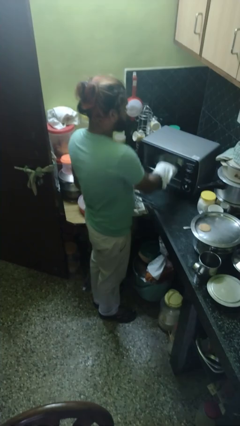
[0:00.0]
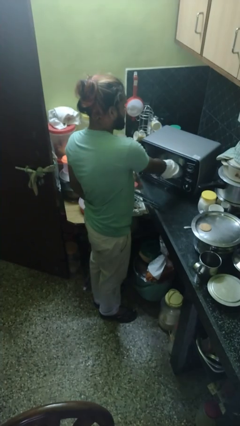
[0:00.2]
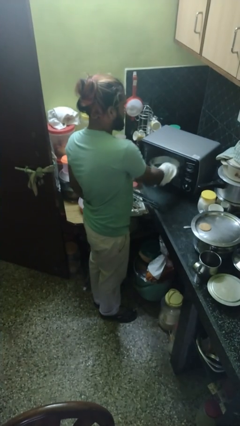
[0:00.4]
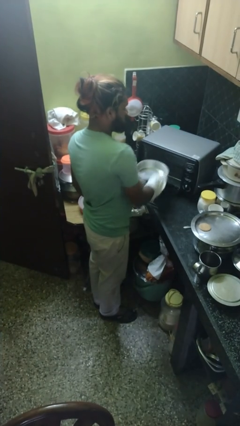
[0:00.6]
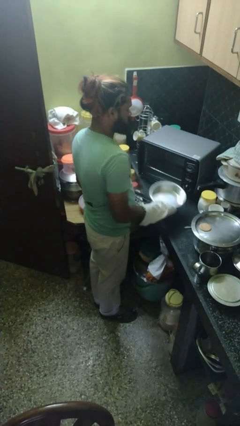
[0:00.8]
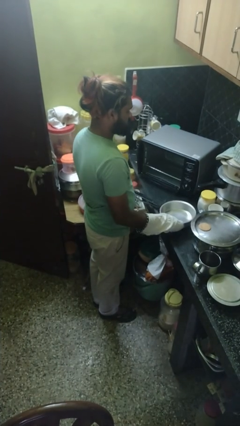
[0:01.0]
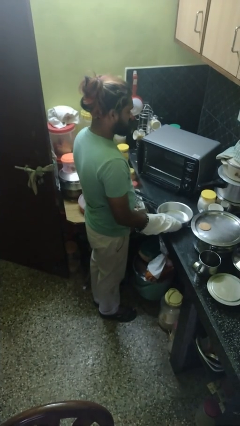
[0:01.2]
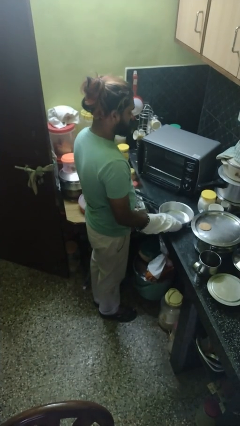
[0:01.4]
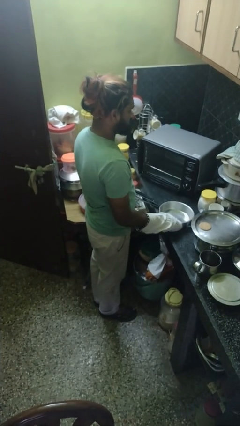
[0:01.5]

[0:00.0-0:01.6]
person takes object from oven

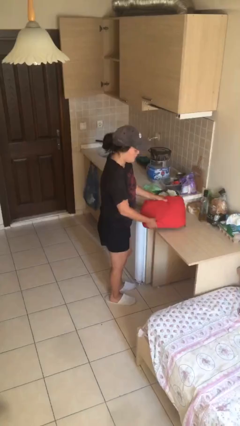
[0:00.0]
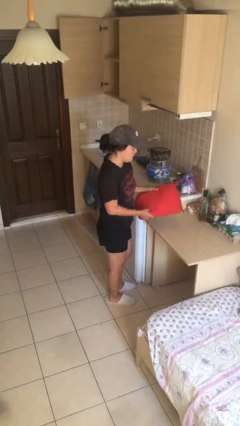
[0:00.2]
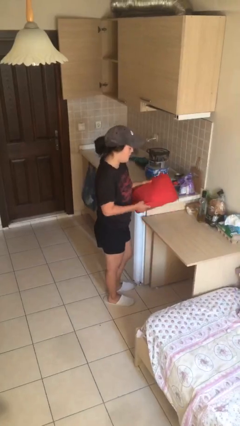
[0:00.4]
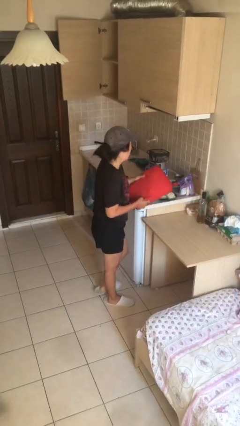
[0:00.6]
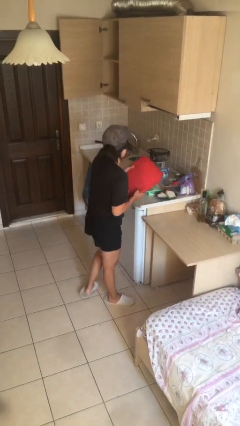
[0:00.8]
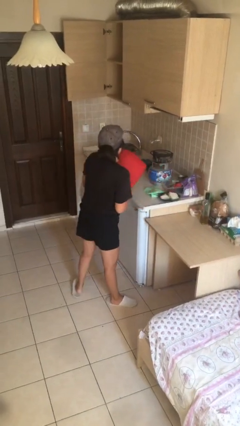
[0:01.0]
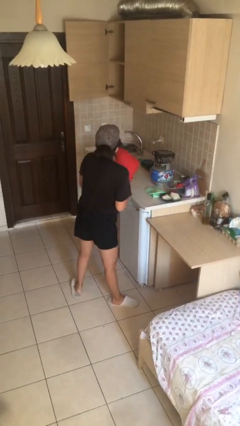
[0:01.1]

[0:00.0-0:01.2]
person picks up object from table

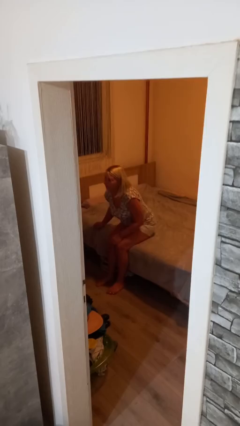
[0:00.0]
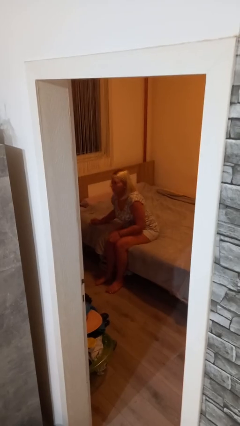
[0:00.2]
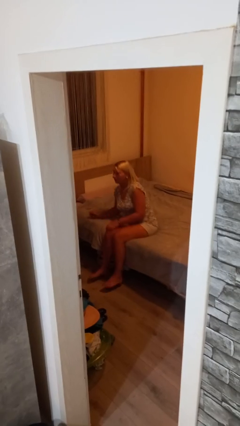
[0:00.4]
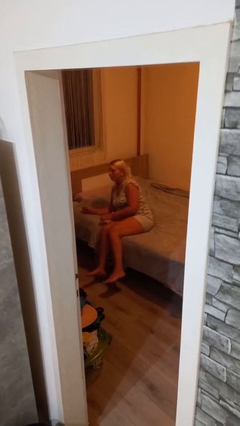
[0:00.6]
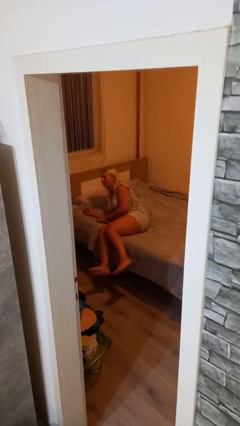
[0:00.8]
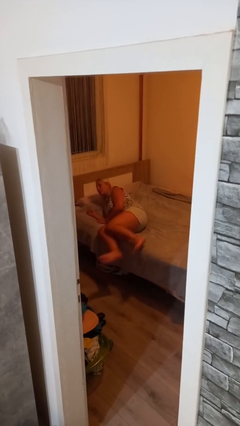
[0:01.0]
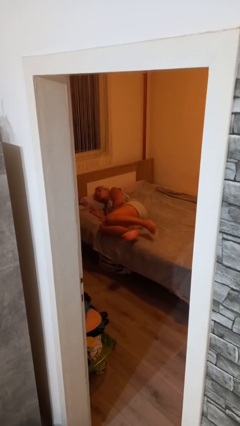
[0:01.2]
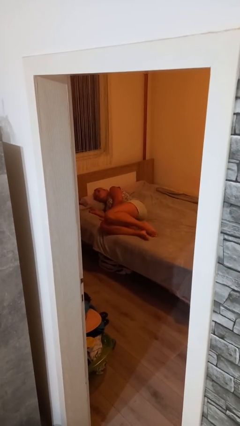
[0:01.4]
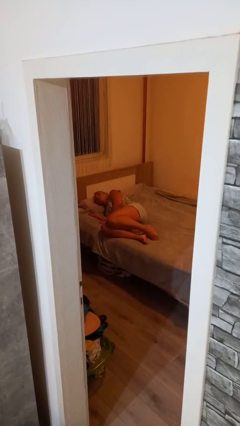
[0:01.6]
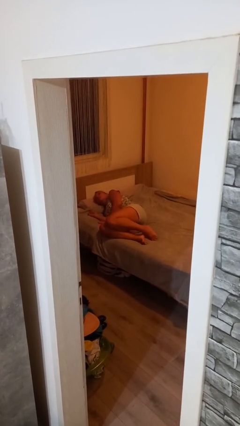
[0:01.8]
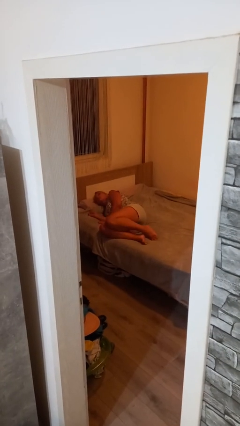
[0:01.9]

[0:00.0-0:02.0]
person lies down on bed

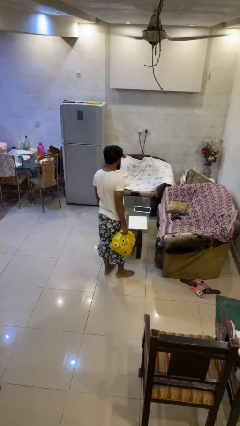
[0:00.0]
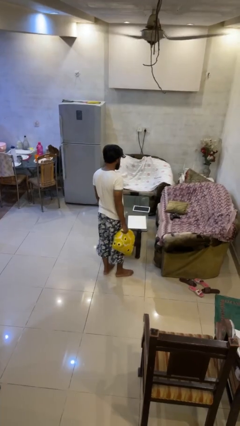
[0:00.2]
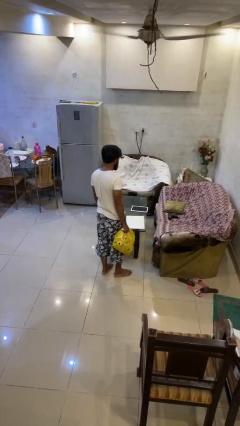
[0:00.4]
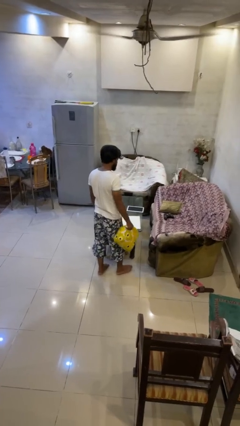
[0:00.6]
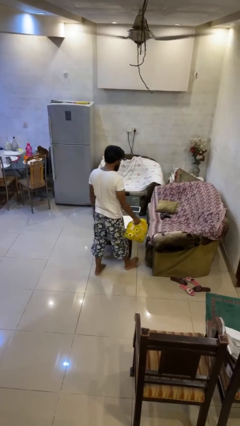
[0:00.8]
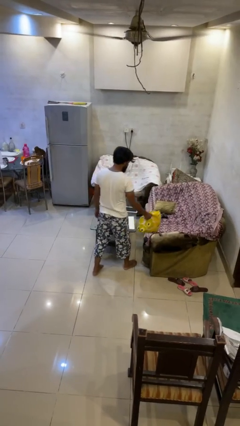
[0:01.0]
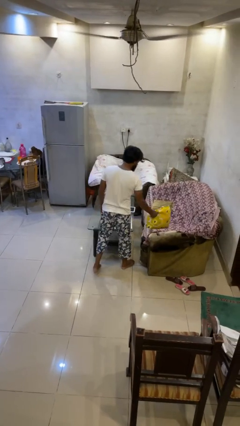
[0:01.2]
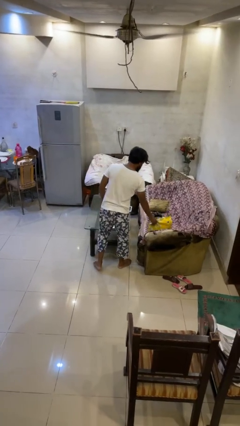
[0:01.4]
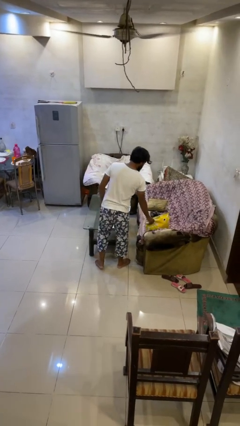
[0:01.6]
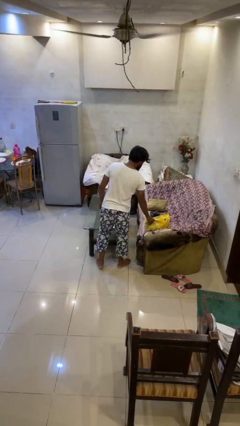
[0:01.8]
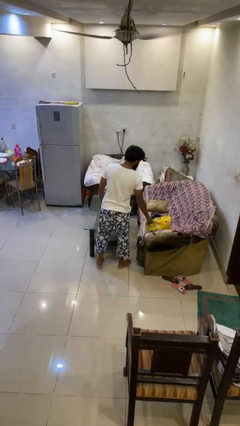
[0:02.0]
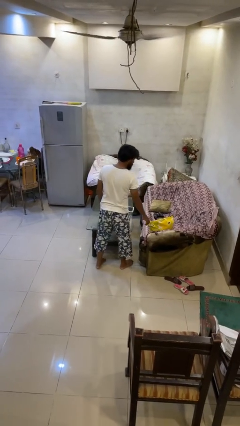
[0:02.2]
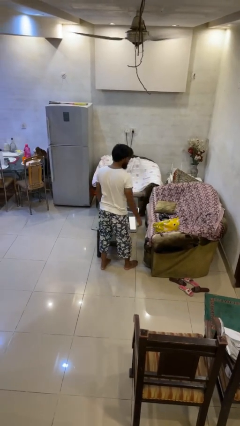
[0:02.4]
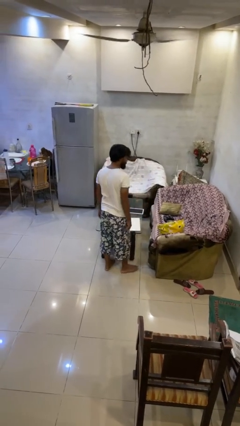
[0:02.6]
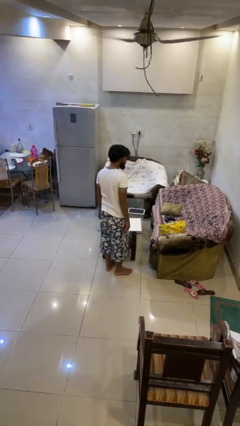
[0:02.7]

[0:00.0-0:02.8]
person puts down object on couch

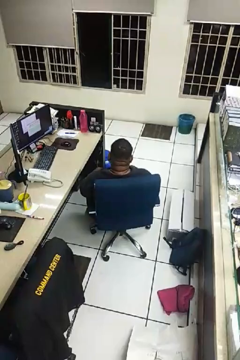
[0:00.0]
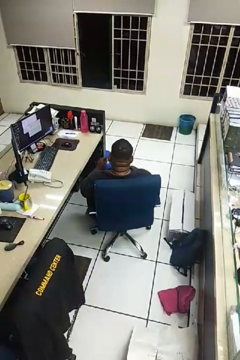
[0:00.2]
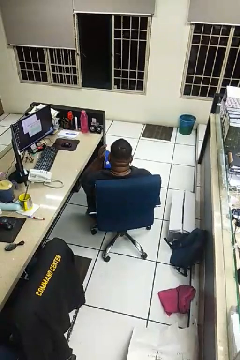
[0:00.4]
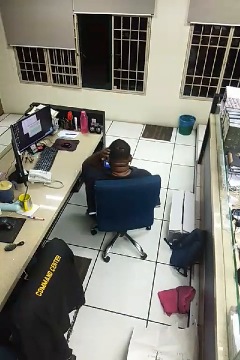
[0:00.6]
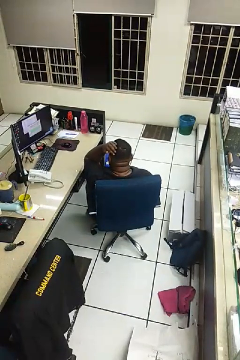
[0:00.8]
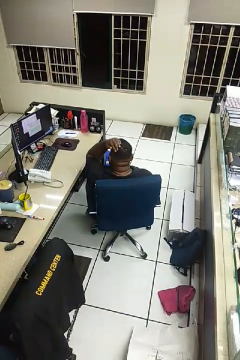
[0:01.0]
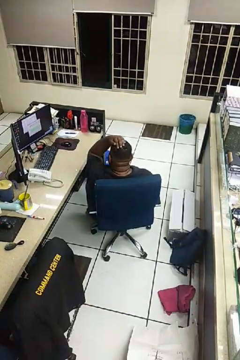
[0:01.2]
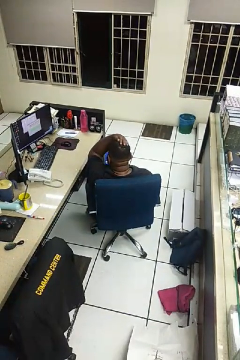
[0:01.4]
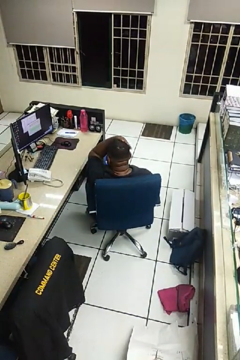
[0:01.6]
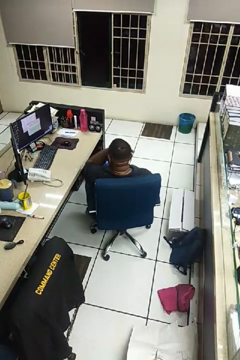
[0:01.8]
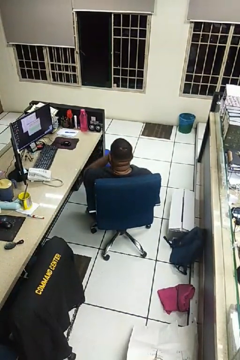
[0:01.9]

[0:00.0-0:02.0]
person strokes hair

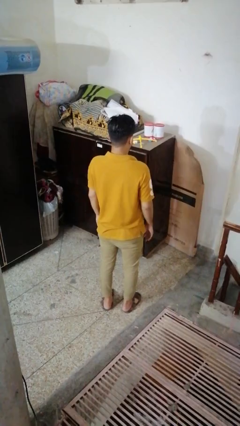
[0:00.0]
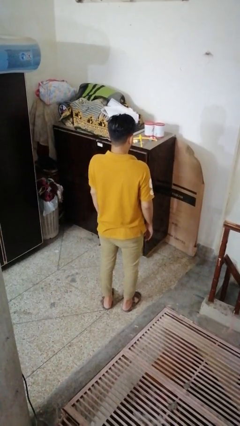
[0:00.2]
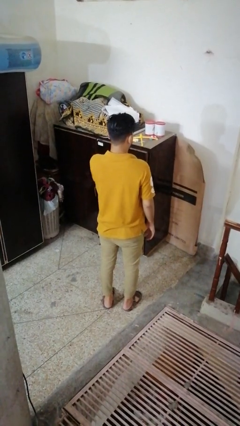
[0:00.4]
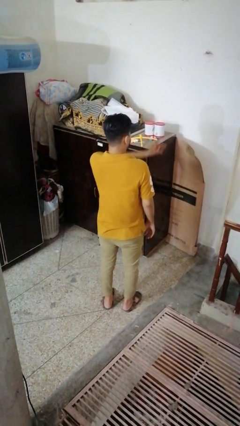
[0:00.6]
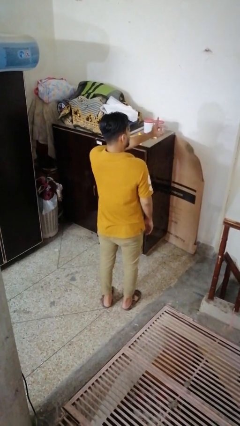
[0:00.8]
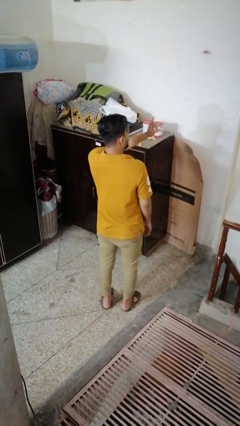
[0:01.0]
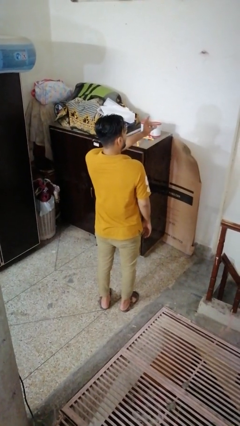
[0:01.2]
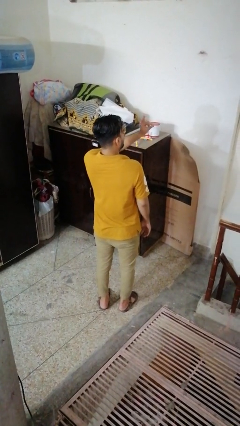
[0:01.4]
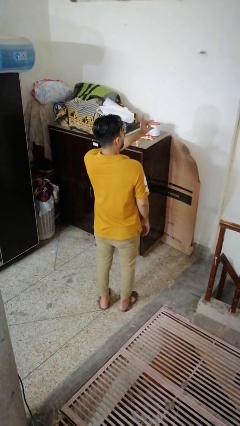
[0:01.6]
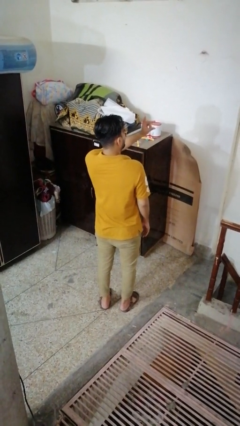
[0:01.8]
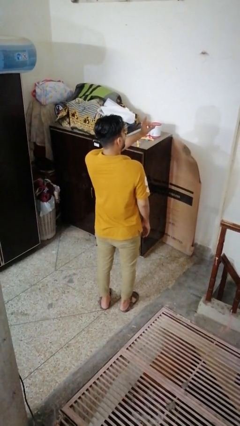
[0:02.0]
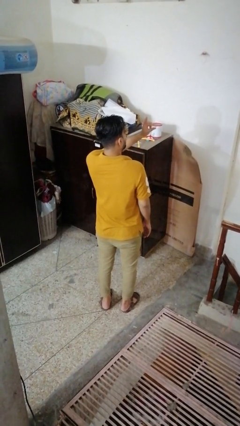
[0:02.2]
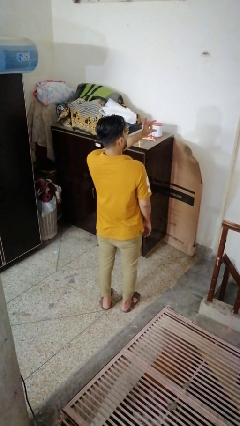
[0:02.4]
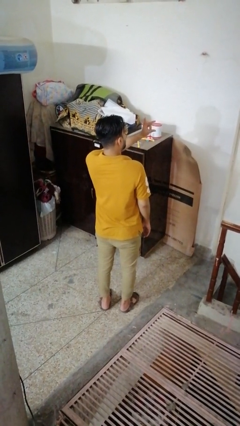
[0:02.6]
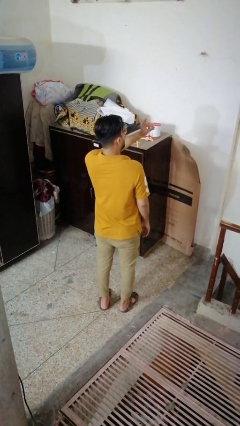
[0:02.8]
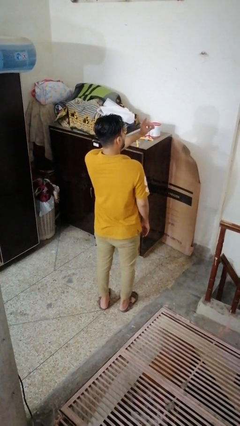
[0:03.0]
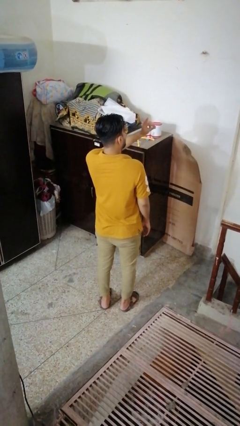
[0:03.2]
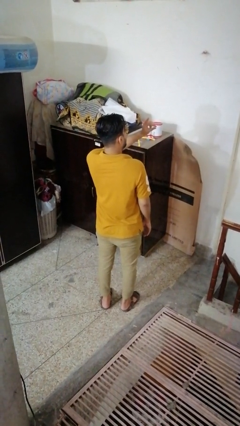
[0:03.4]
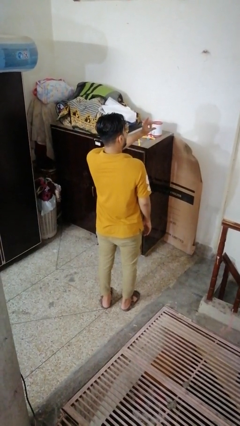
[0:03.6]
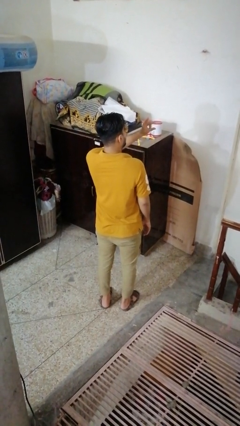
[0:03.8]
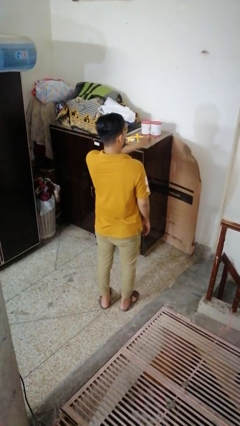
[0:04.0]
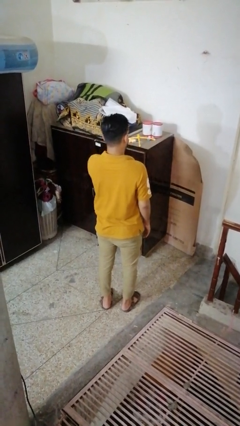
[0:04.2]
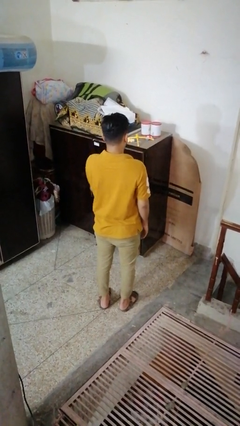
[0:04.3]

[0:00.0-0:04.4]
person snaps fingers

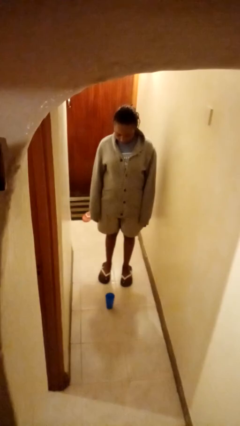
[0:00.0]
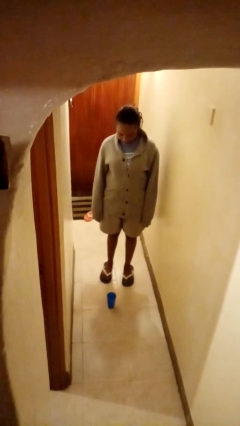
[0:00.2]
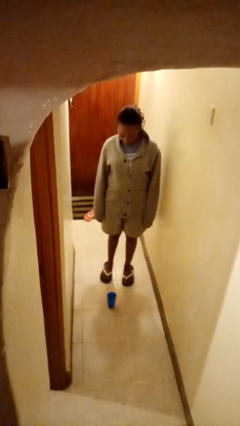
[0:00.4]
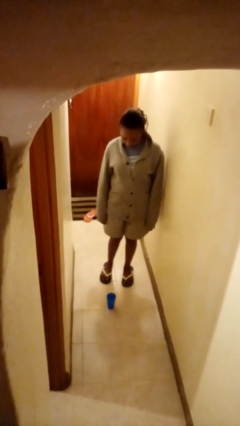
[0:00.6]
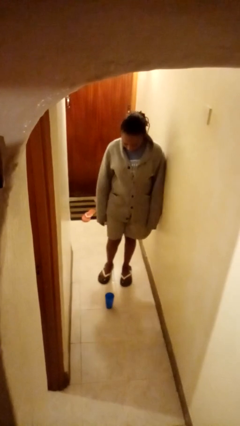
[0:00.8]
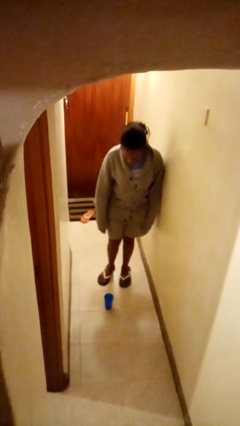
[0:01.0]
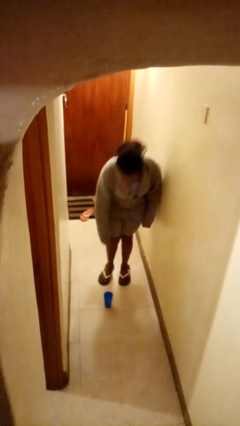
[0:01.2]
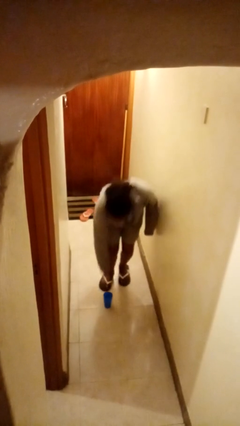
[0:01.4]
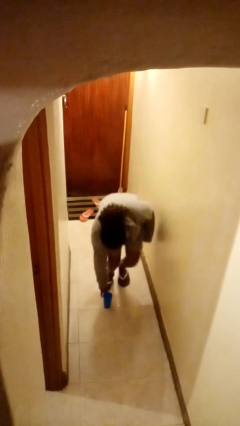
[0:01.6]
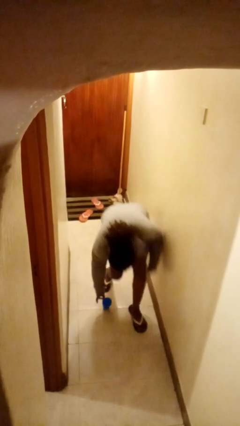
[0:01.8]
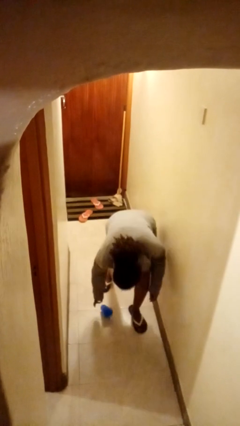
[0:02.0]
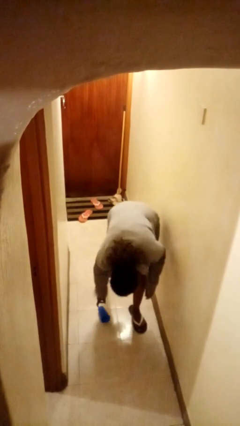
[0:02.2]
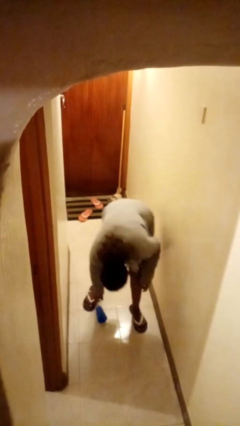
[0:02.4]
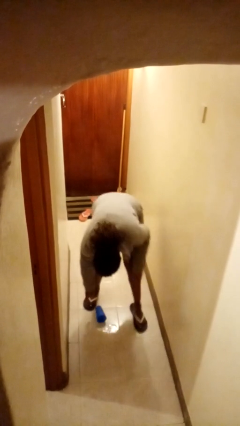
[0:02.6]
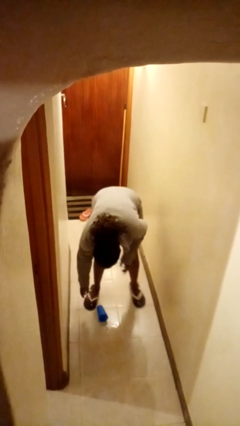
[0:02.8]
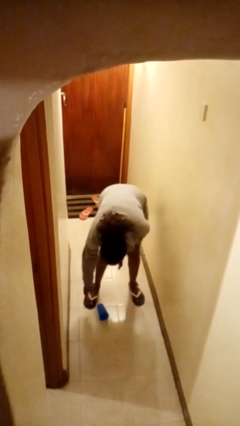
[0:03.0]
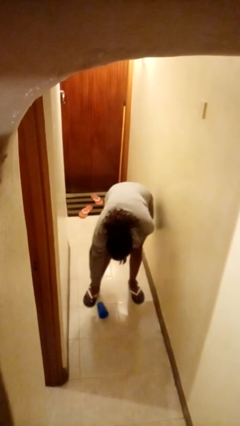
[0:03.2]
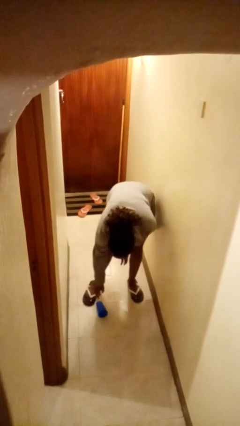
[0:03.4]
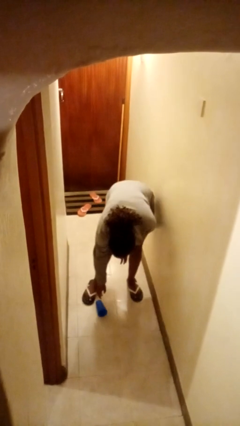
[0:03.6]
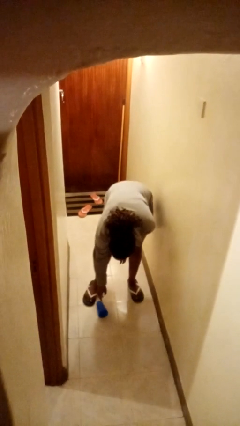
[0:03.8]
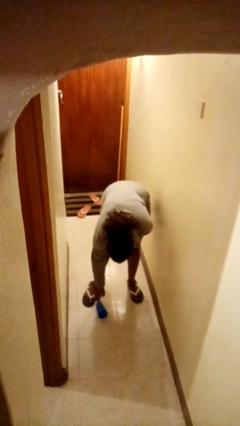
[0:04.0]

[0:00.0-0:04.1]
person spills on floor
